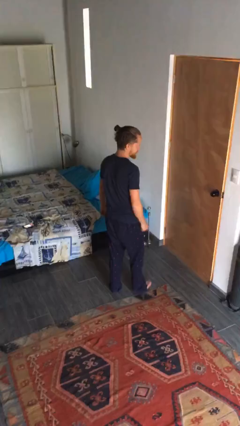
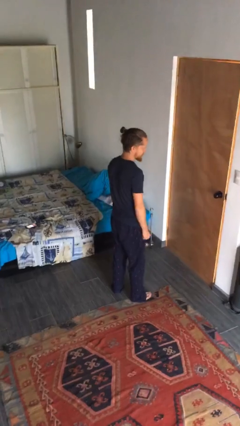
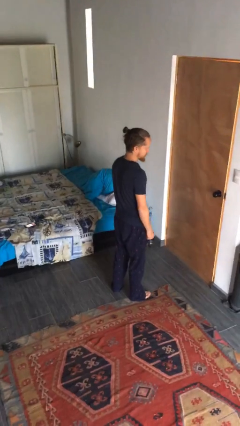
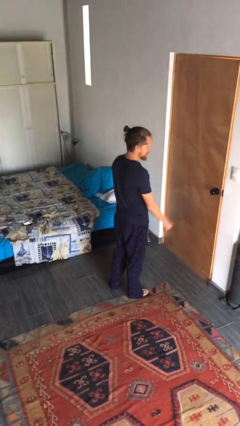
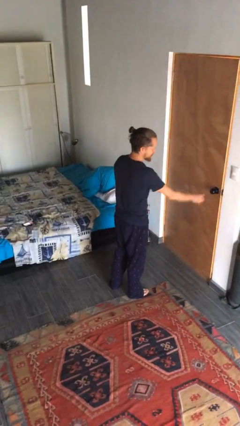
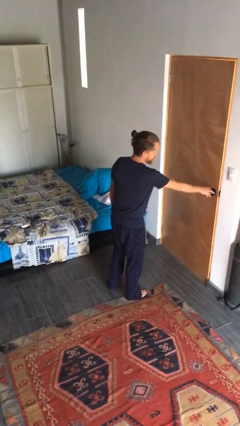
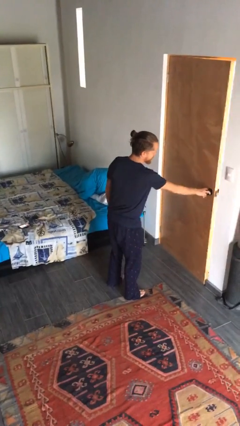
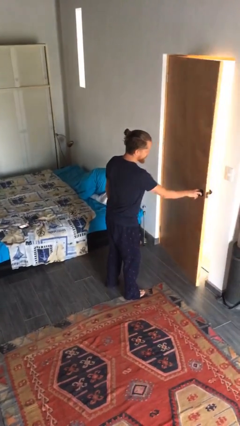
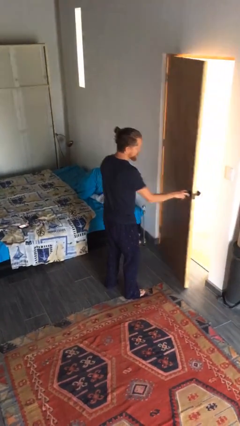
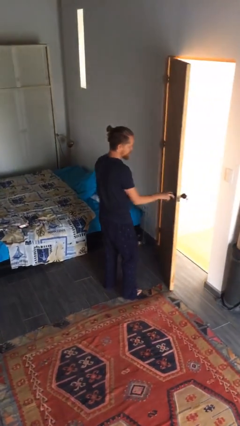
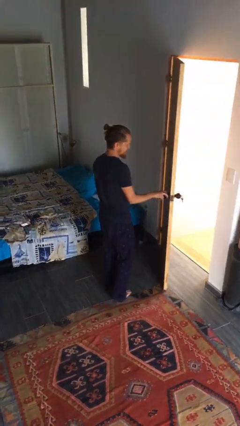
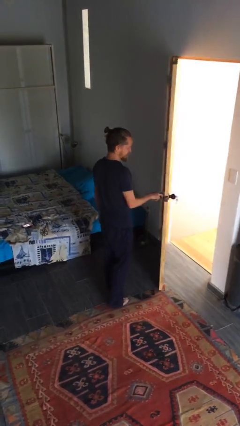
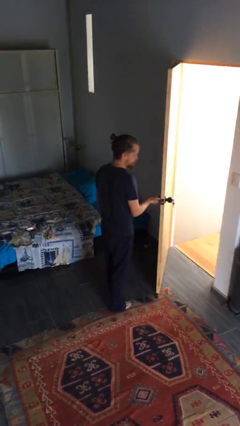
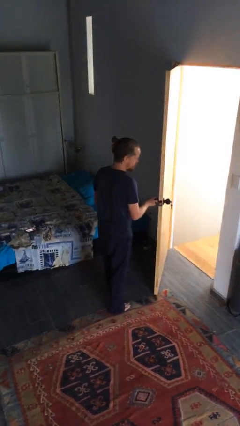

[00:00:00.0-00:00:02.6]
person opens facility door

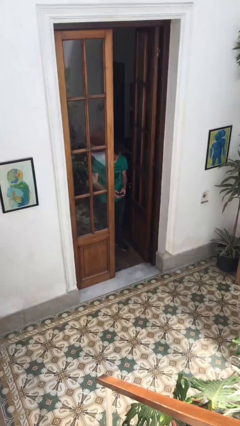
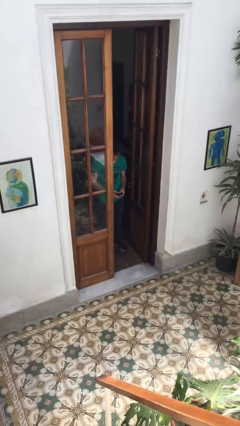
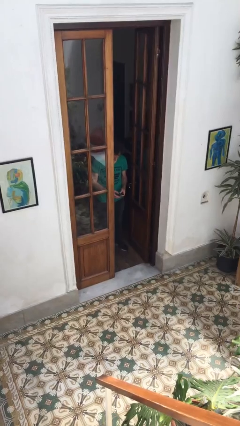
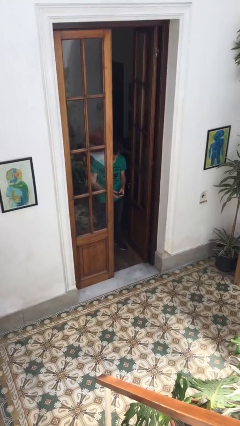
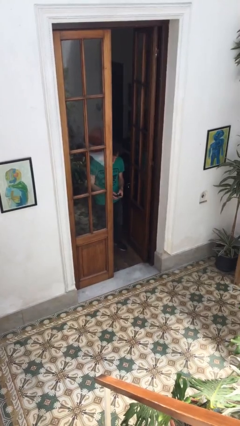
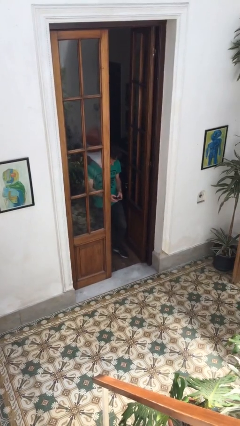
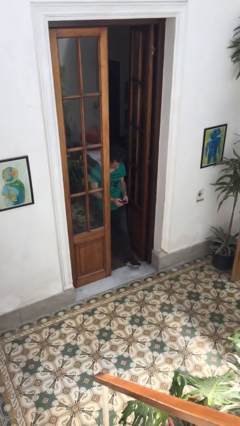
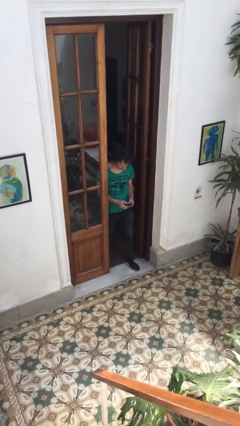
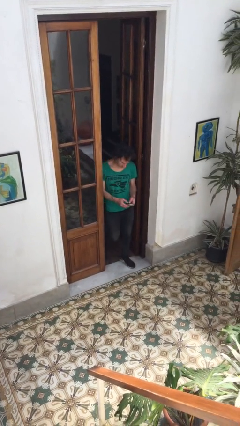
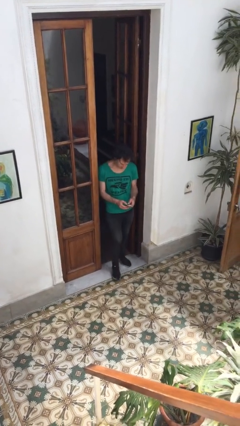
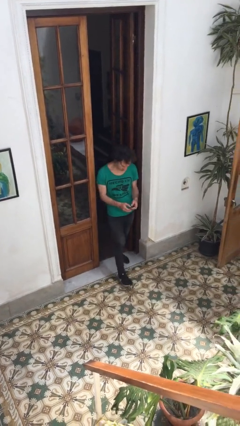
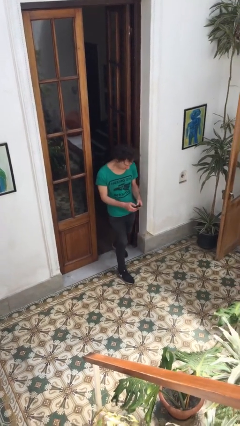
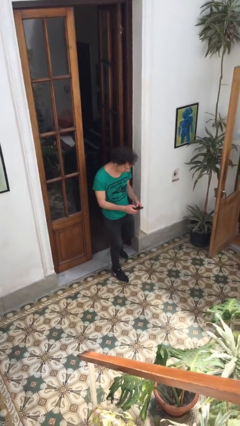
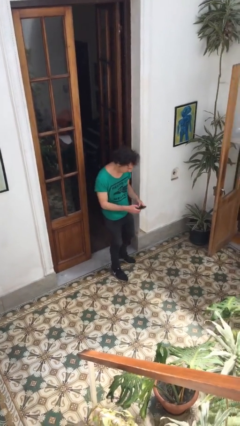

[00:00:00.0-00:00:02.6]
person enters scene through structure

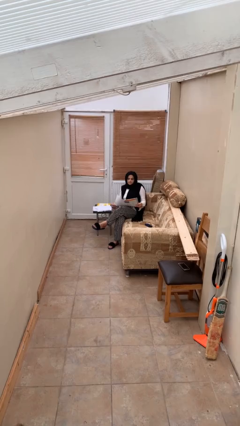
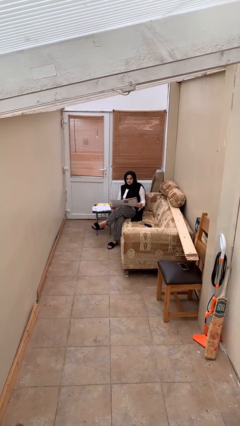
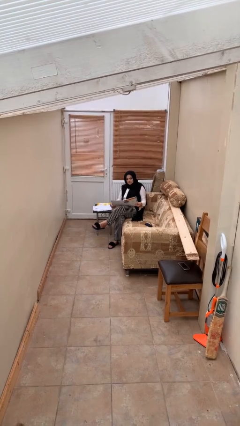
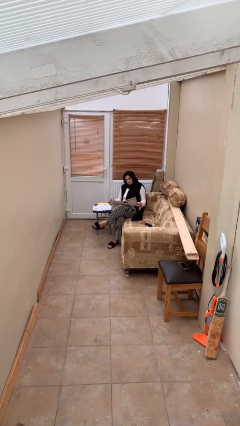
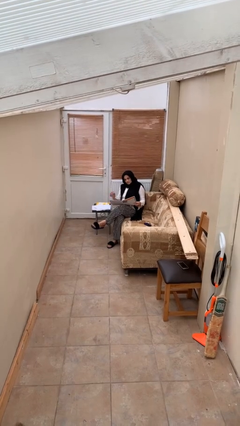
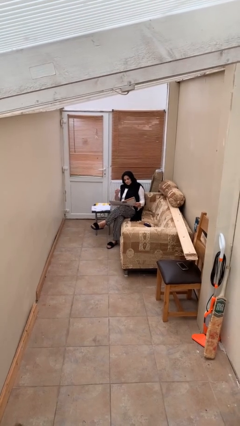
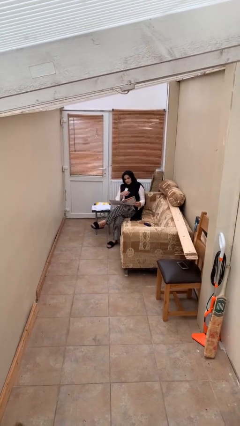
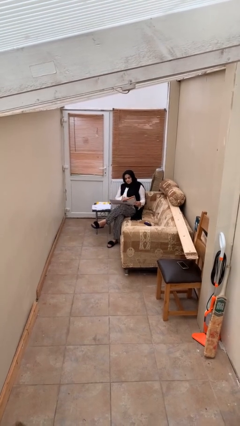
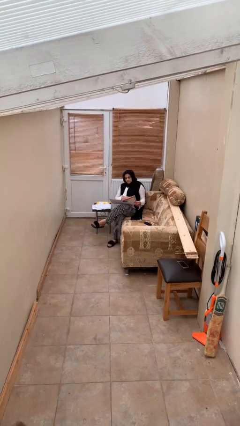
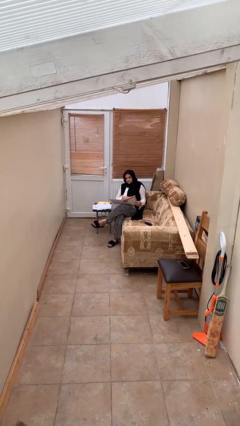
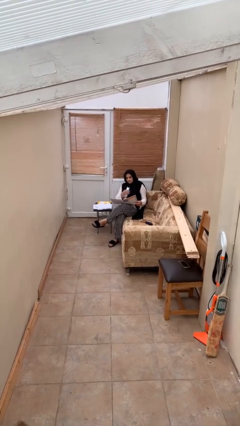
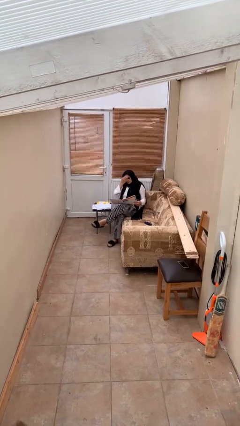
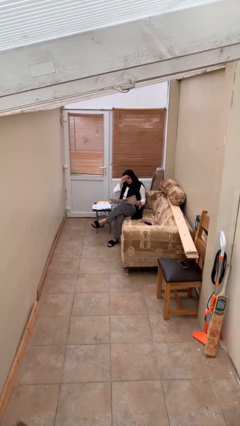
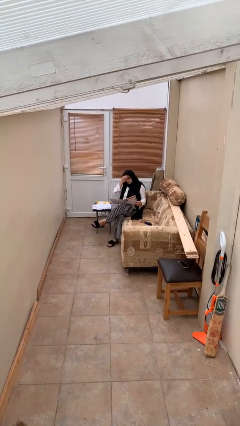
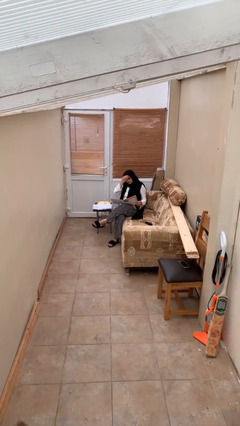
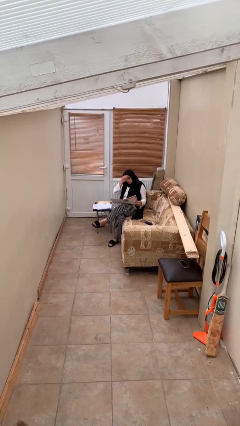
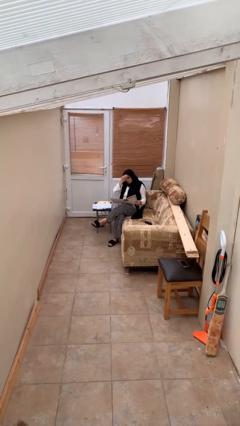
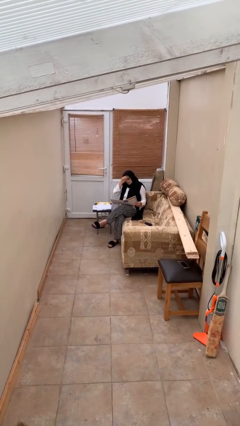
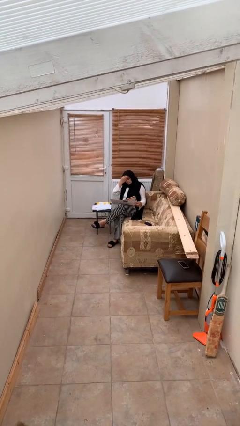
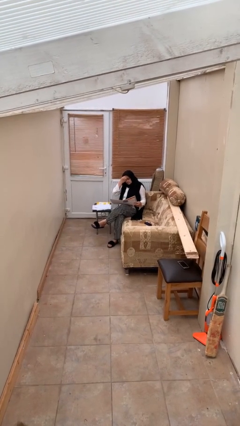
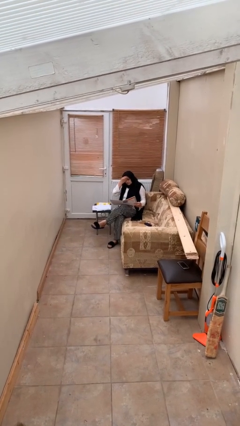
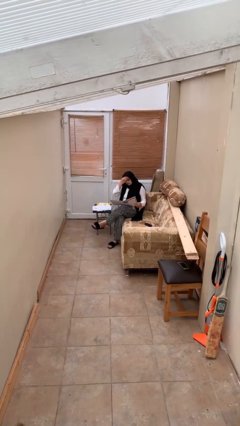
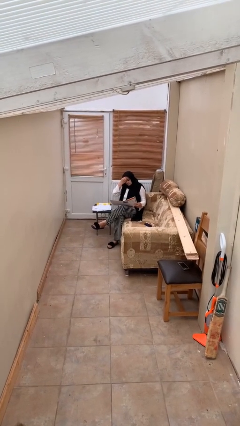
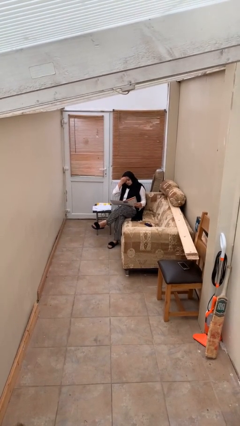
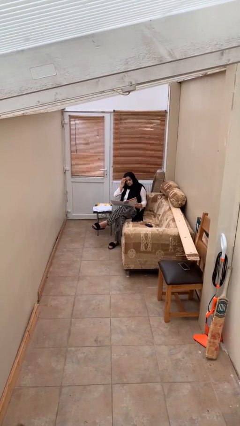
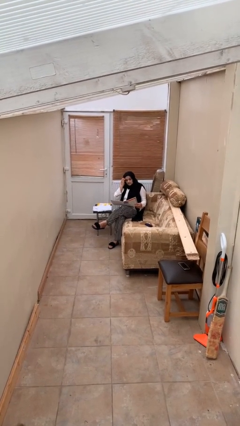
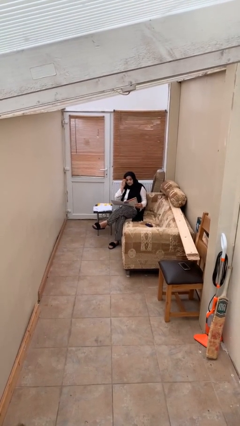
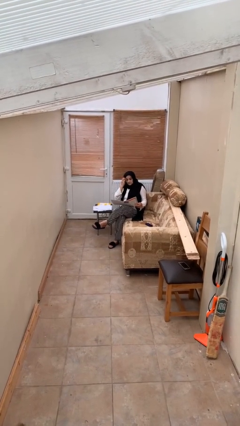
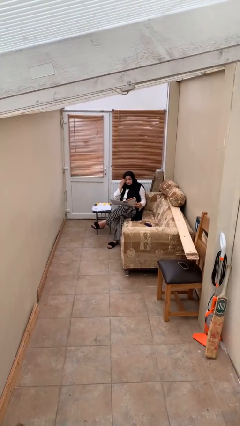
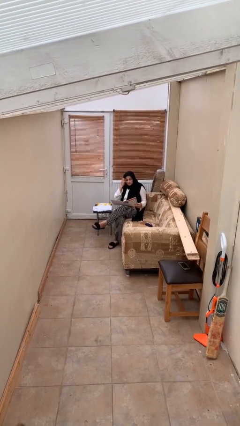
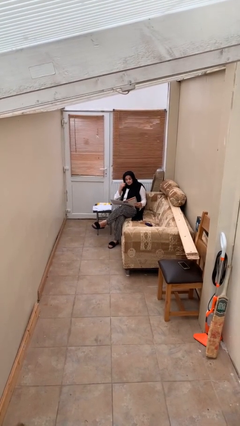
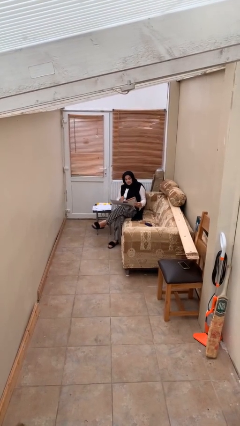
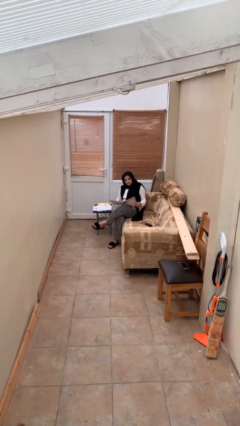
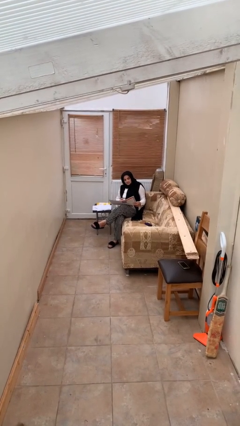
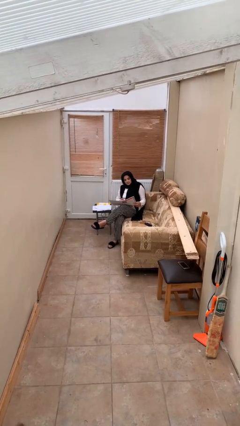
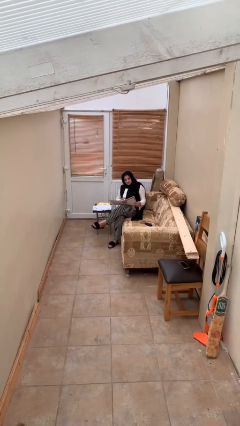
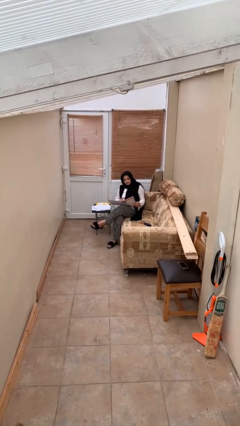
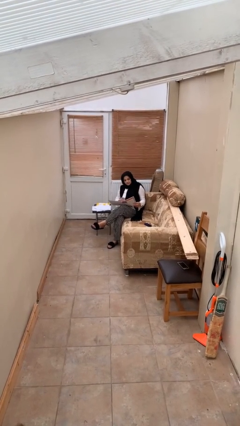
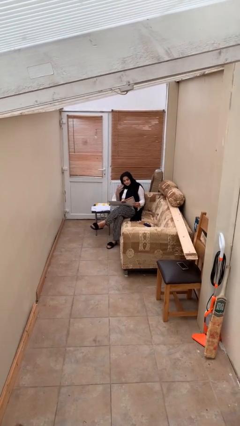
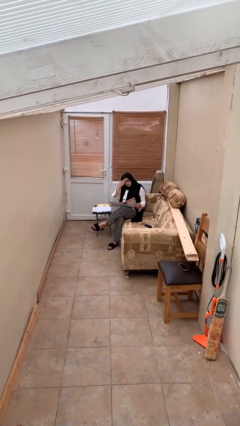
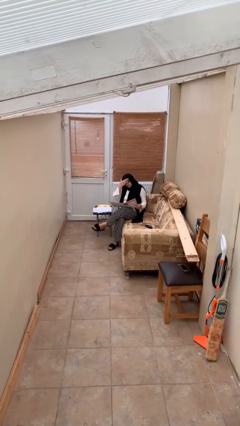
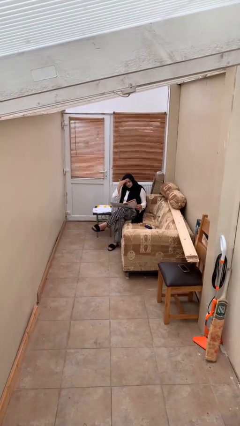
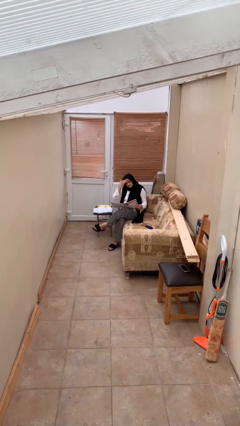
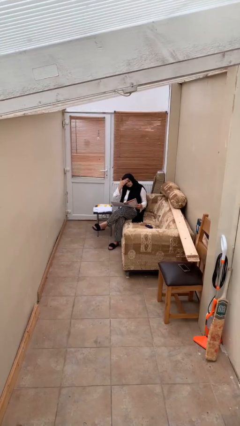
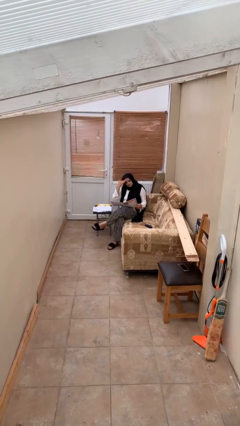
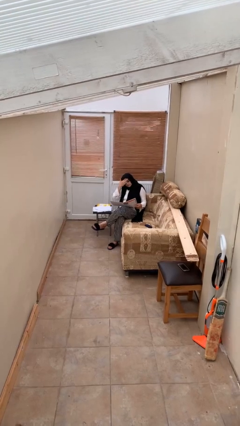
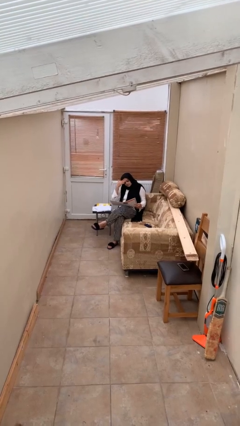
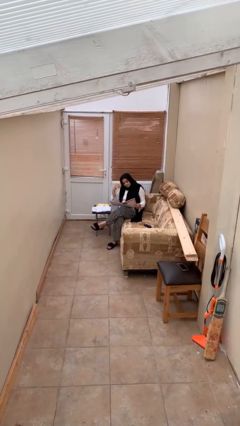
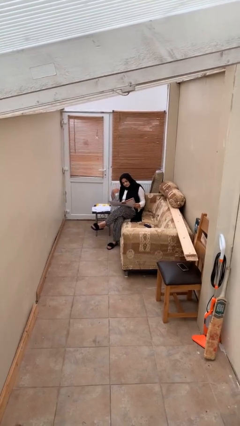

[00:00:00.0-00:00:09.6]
person reads document

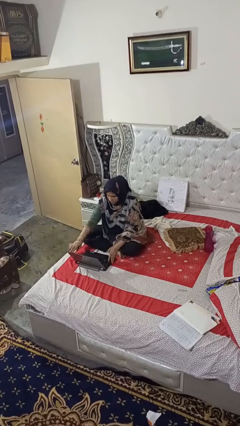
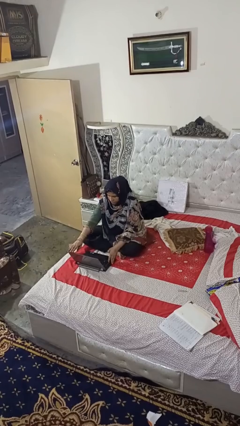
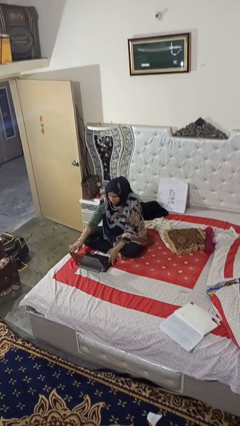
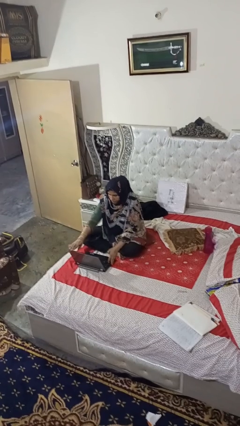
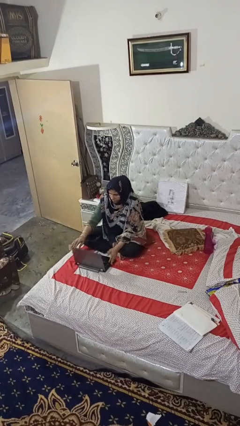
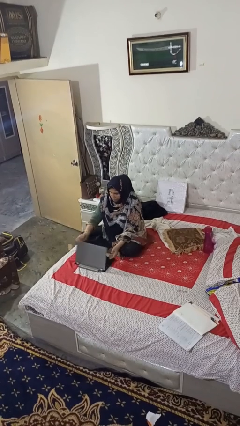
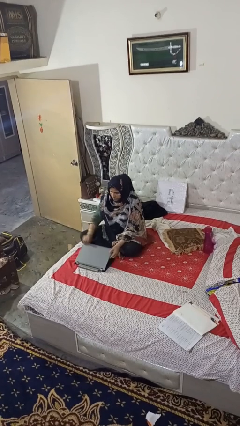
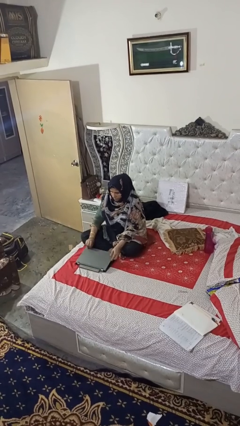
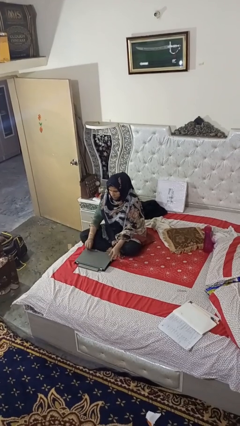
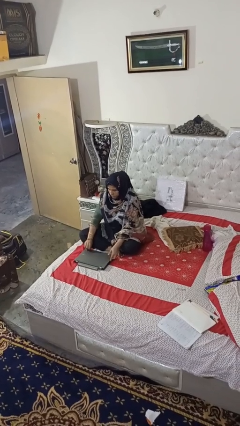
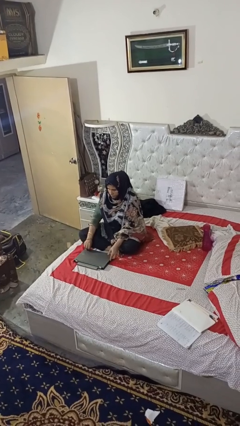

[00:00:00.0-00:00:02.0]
person closes laptop

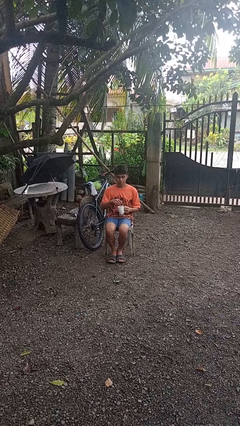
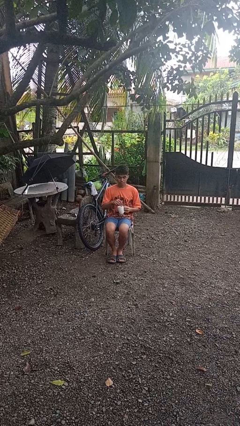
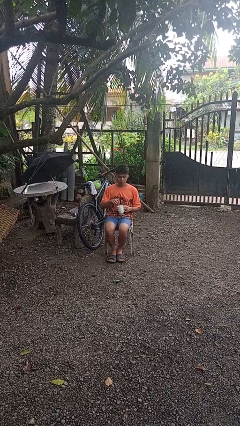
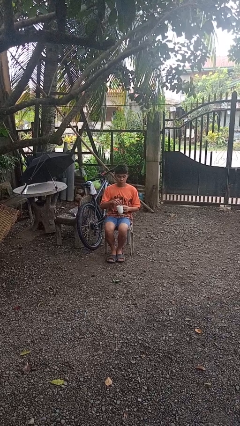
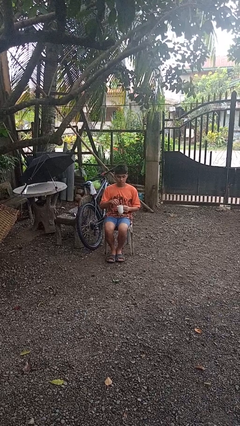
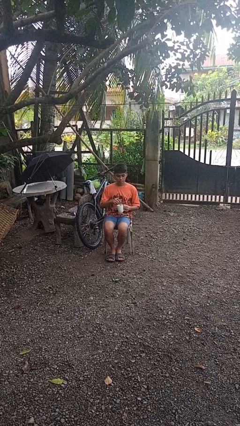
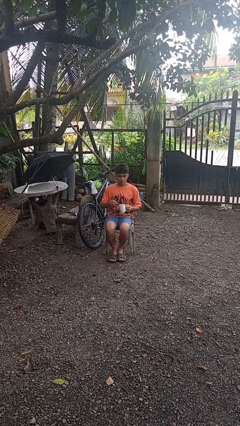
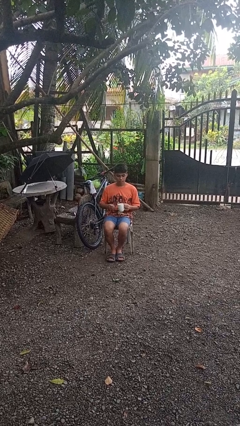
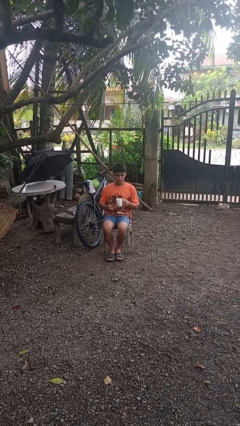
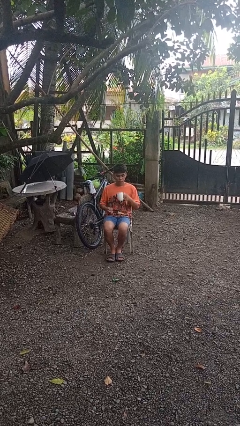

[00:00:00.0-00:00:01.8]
person stirs mug
